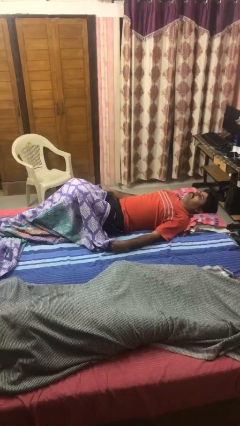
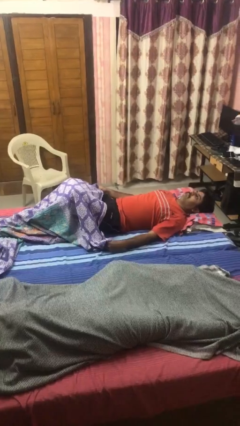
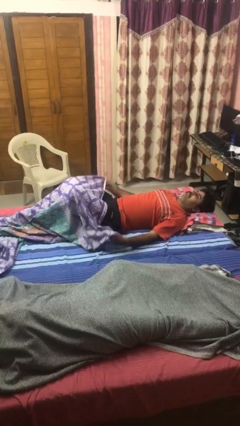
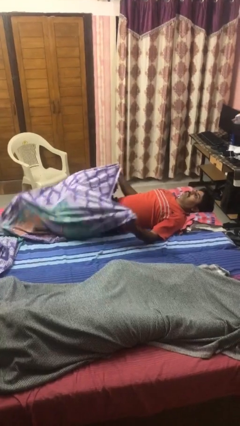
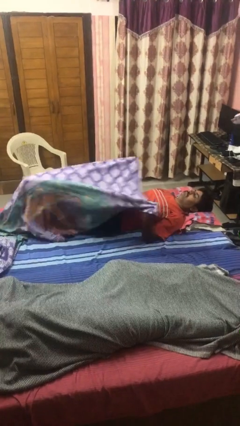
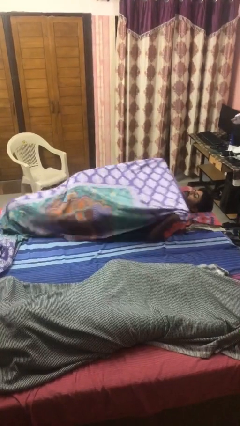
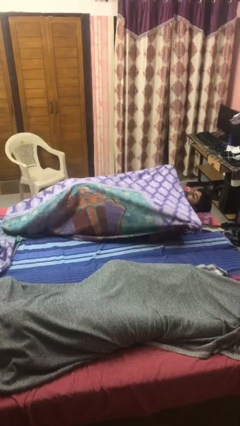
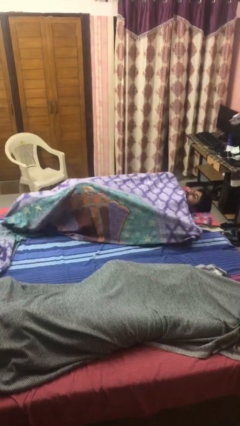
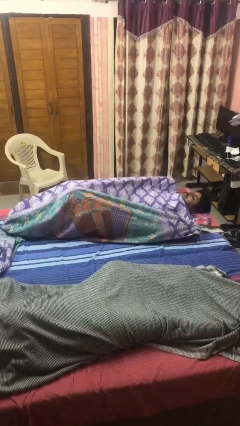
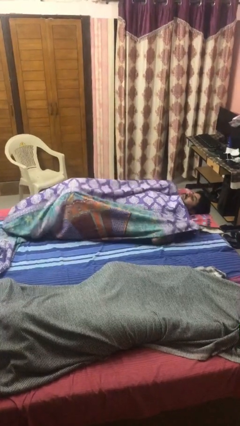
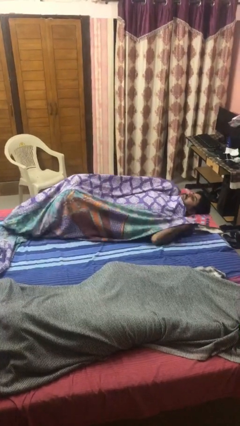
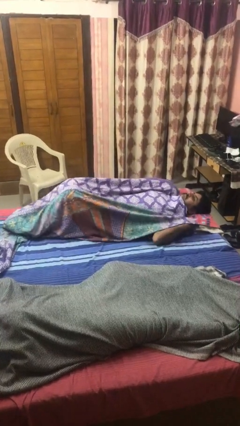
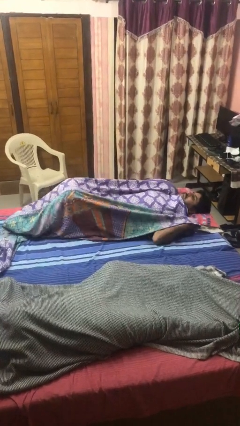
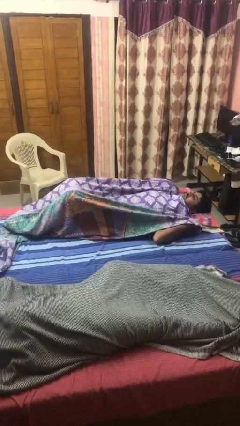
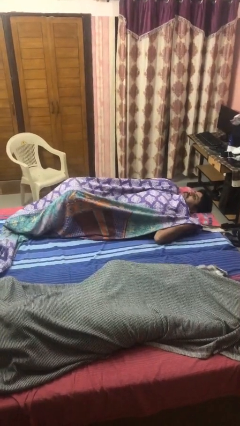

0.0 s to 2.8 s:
person covers with bedsheets

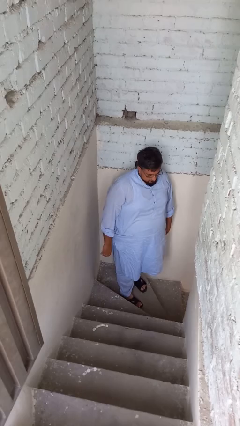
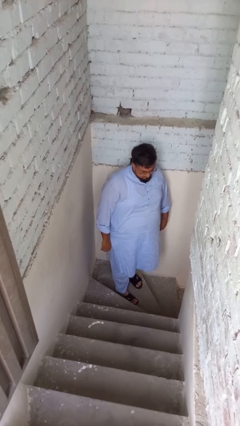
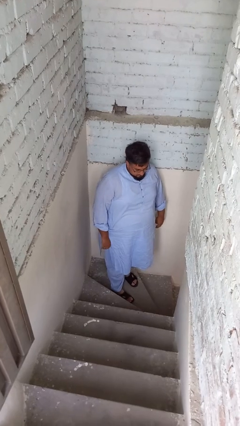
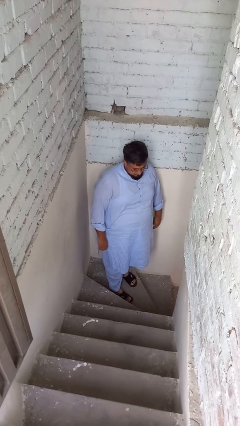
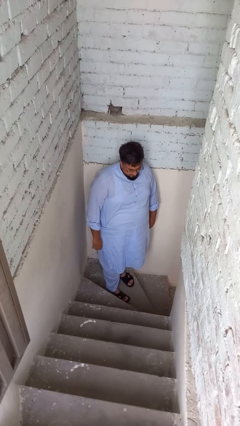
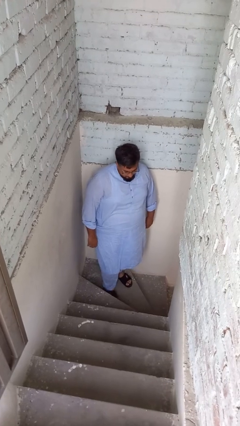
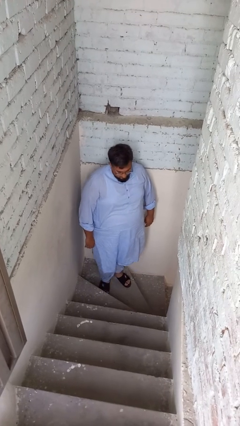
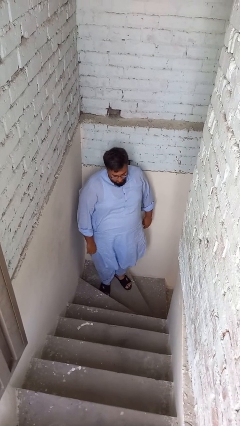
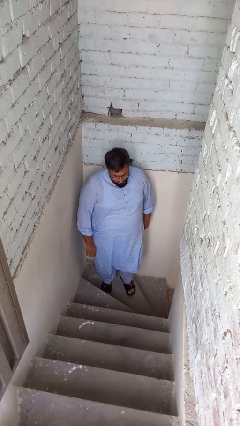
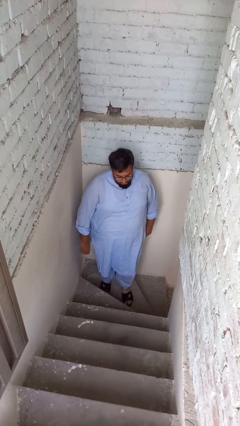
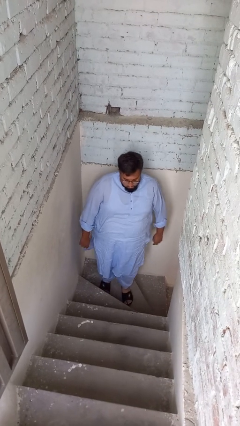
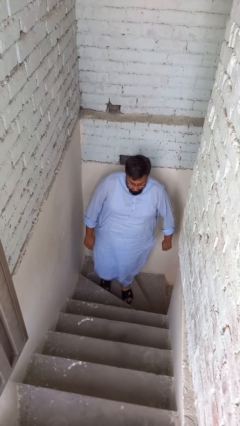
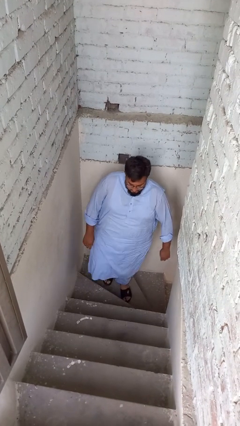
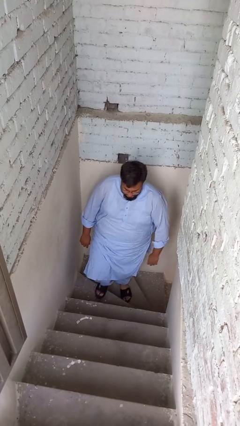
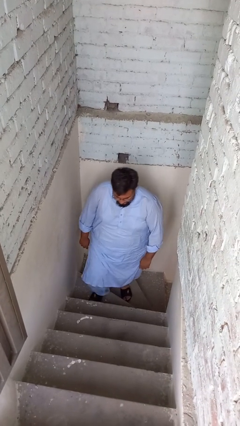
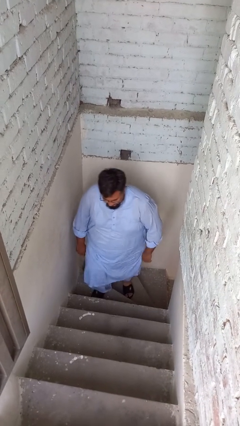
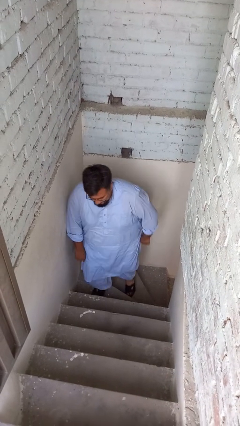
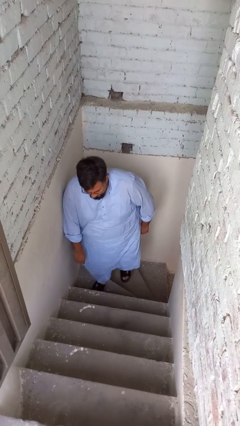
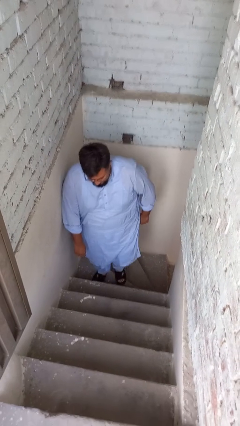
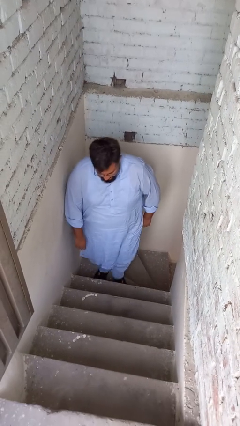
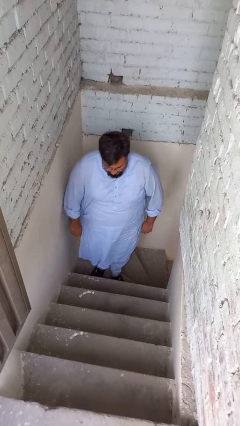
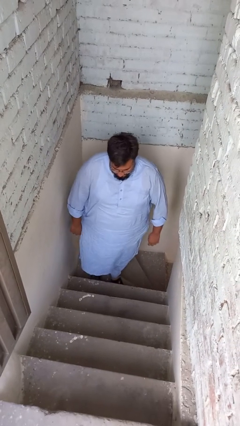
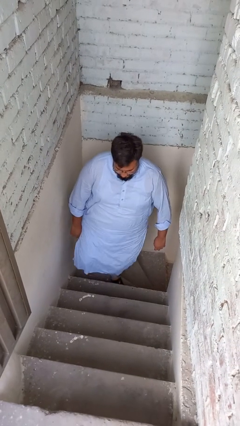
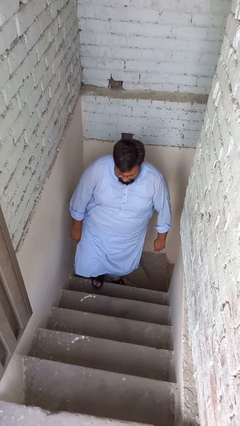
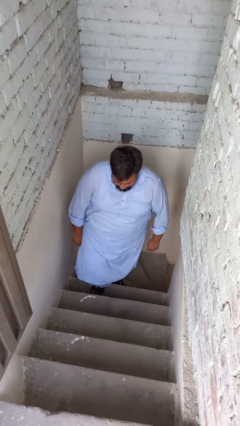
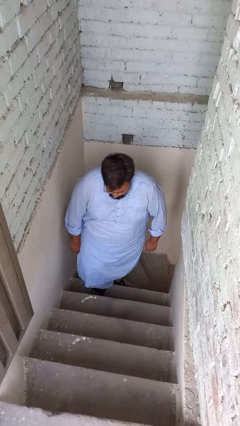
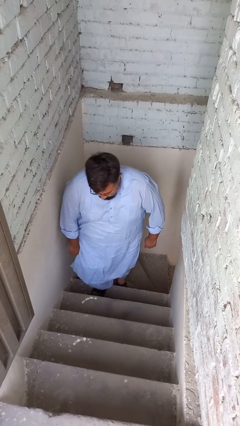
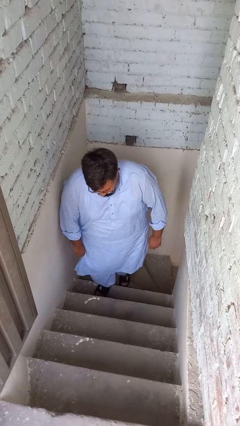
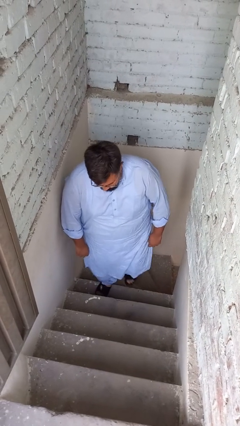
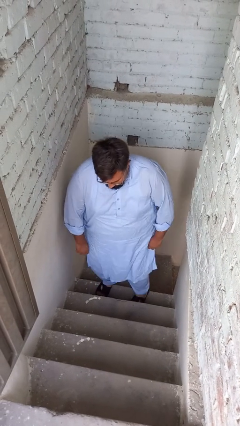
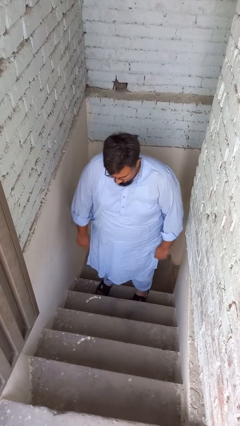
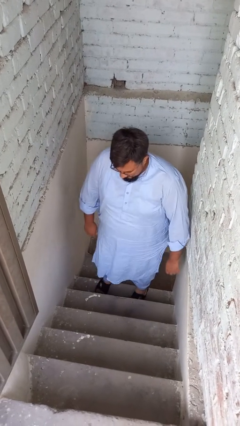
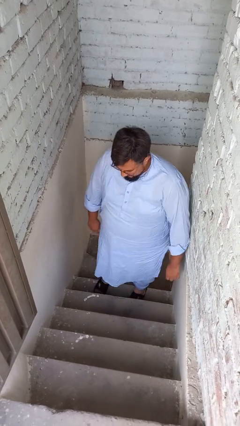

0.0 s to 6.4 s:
person climbs up stairs

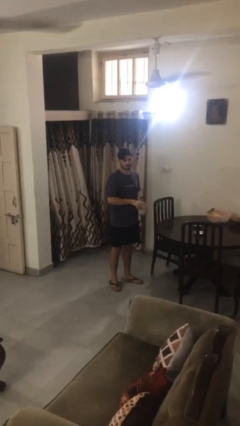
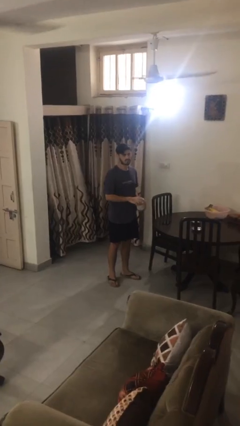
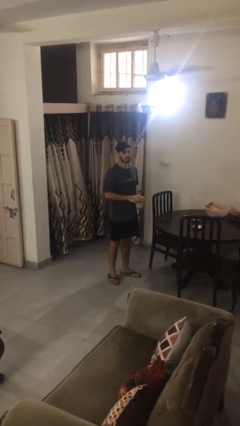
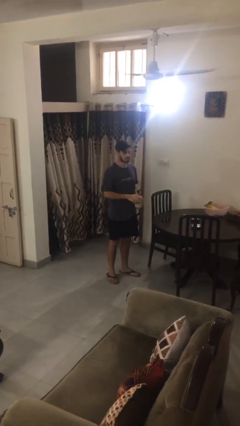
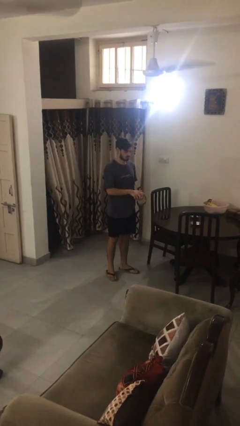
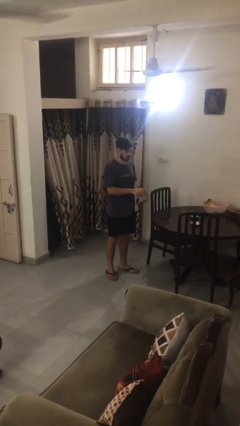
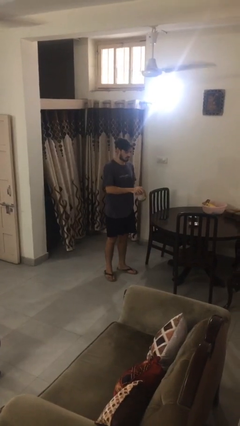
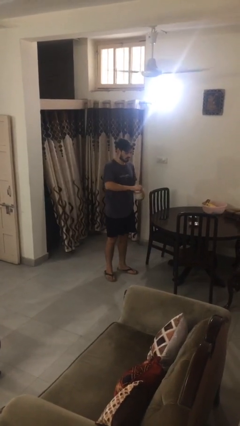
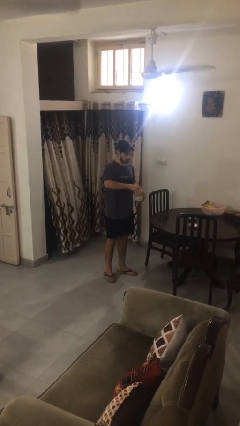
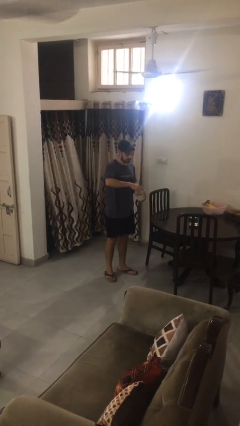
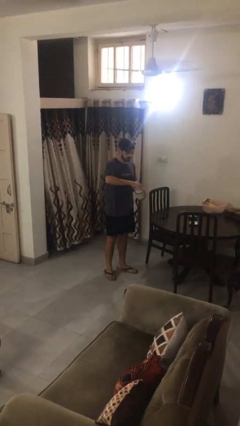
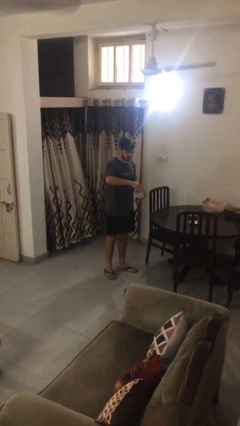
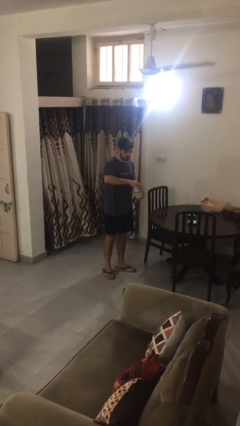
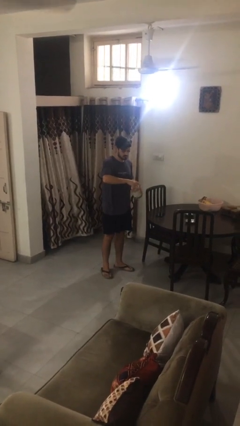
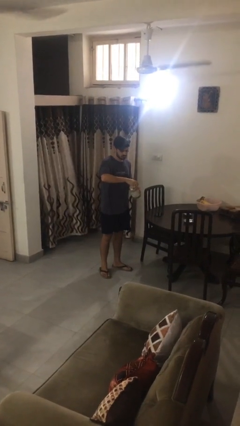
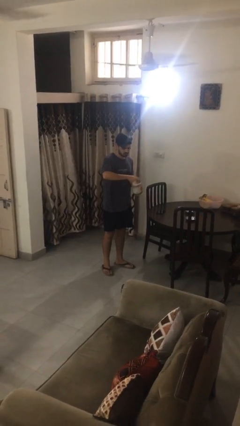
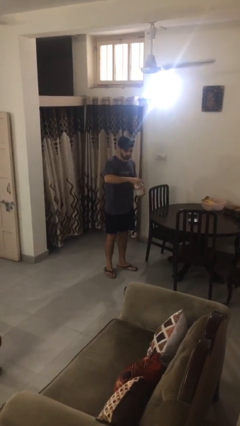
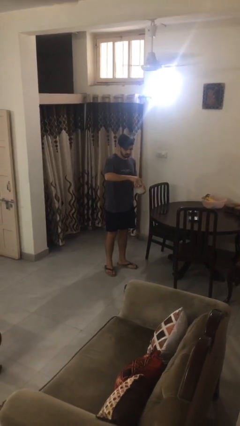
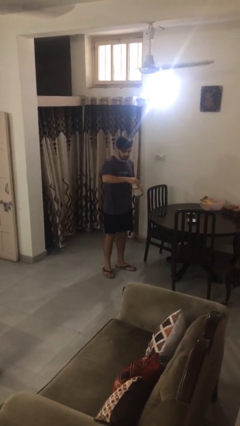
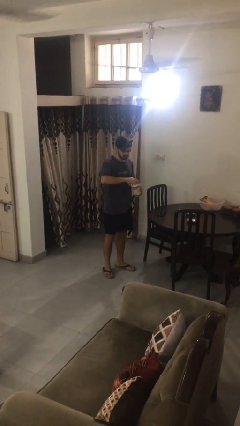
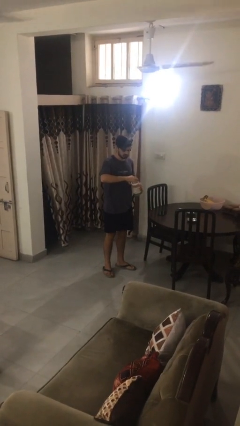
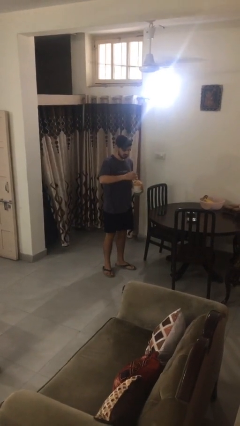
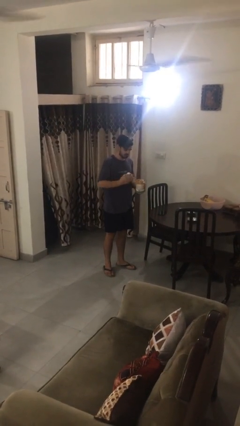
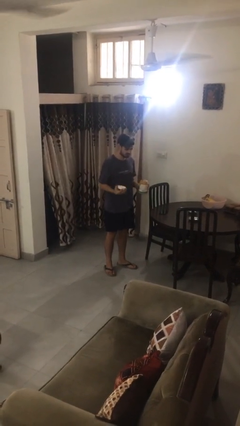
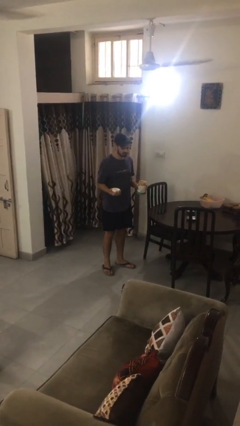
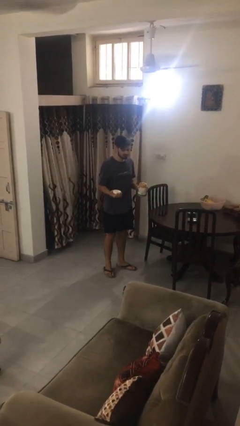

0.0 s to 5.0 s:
person opens jar

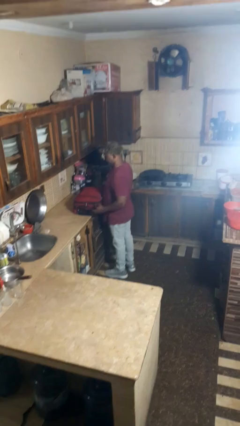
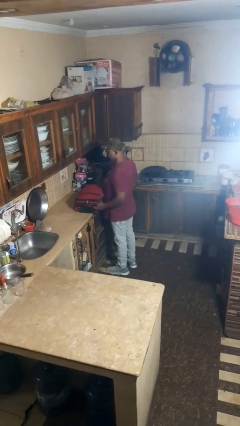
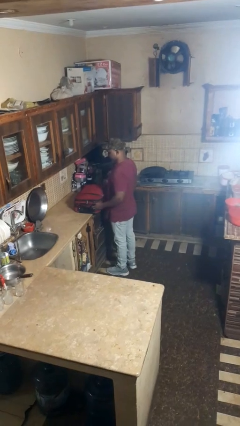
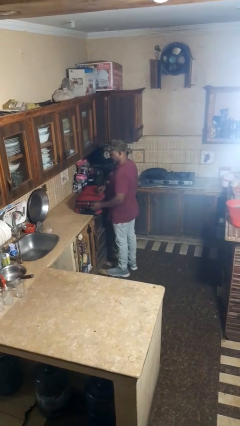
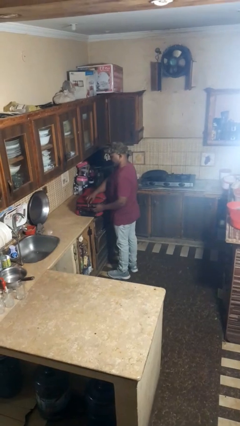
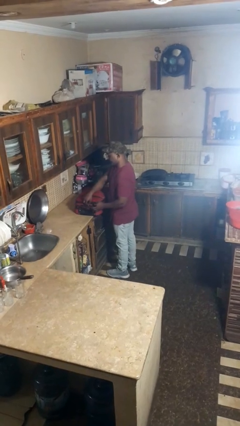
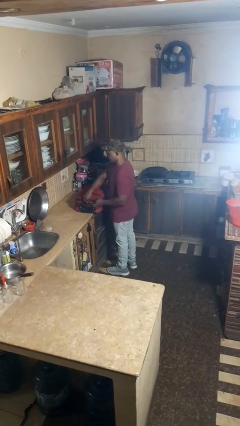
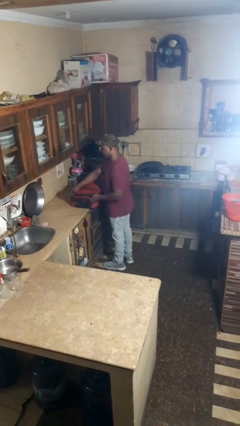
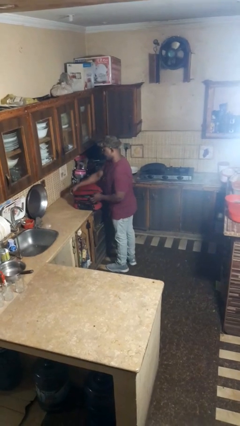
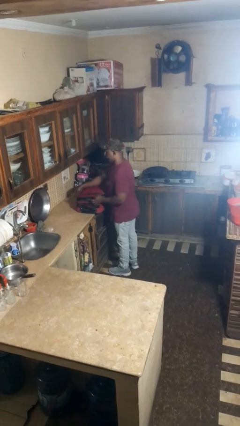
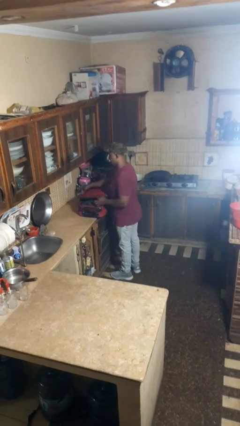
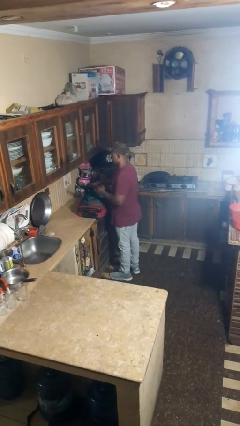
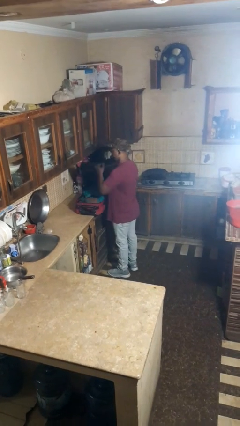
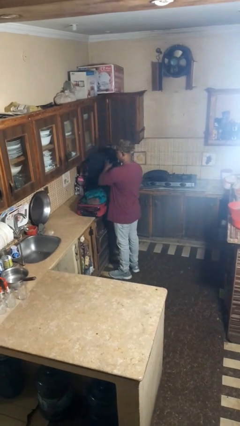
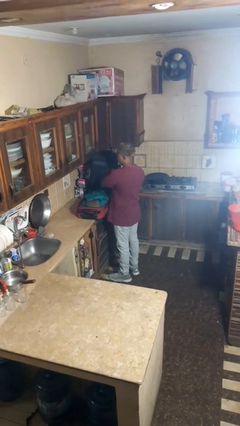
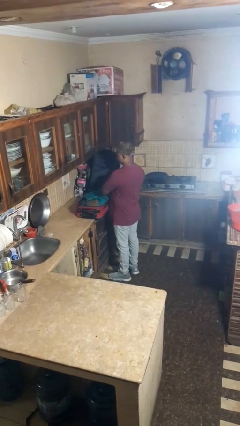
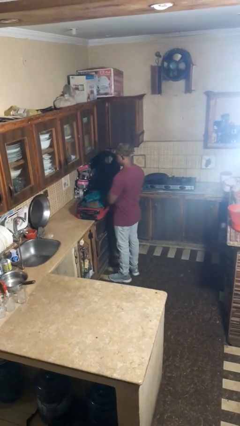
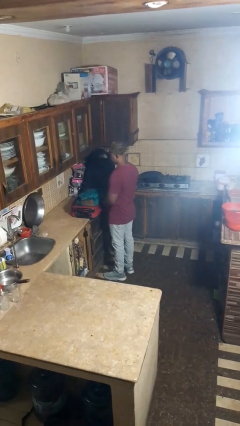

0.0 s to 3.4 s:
person opens suitcase
